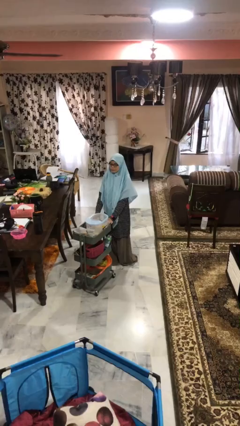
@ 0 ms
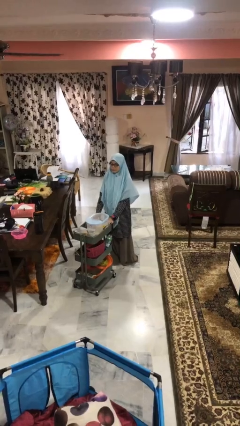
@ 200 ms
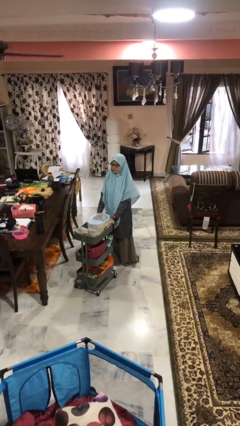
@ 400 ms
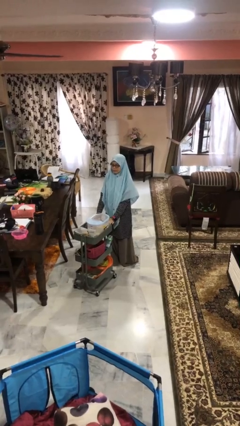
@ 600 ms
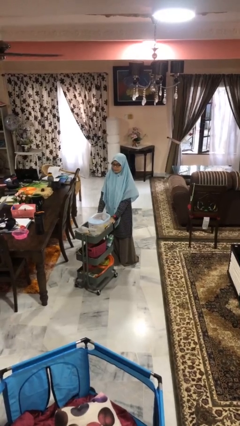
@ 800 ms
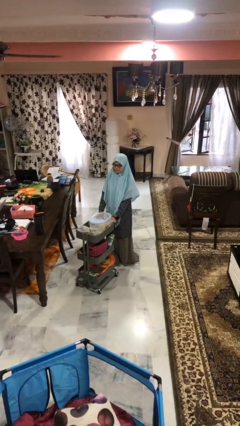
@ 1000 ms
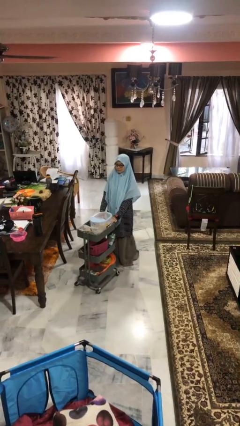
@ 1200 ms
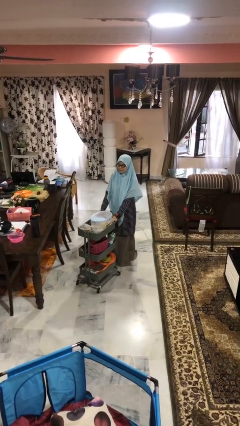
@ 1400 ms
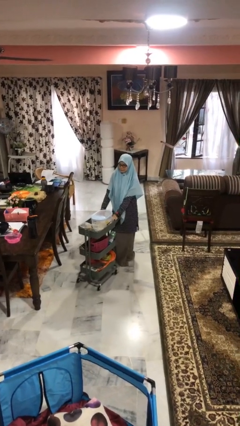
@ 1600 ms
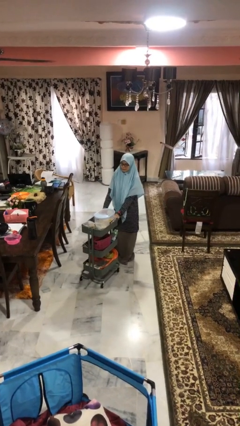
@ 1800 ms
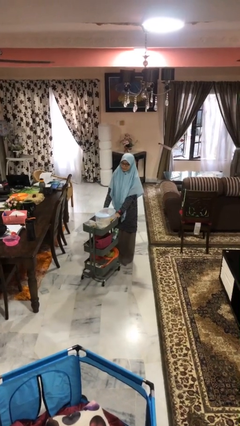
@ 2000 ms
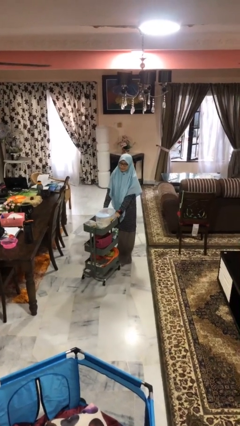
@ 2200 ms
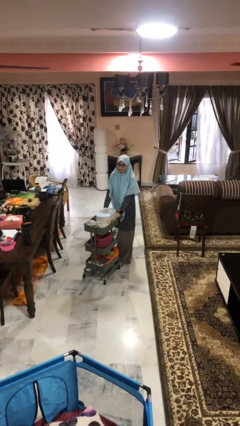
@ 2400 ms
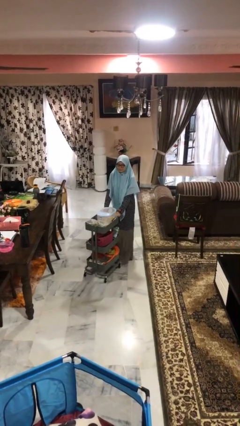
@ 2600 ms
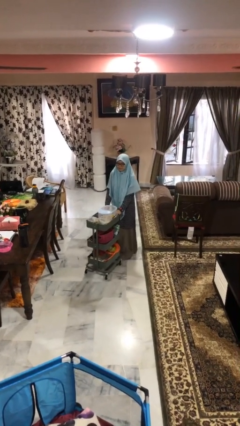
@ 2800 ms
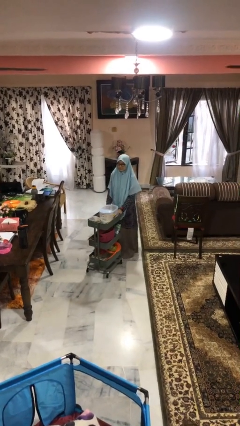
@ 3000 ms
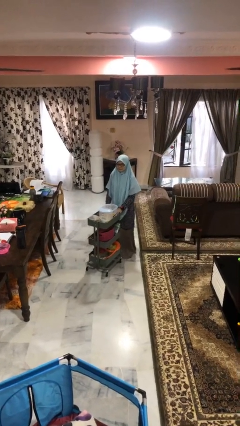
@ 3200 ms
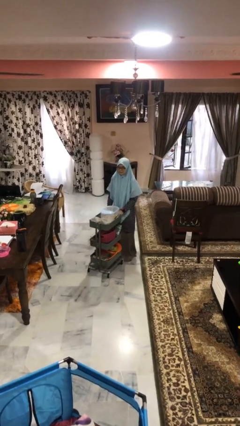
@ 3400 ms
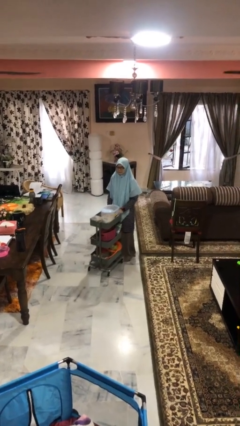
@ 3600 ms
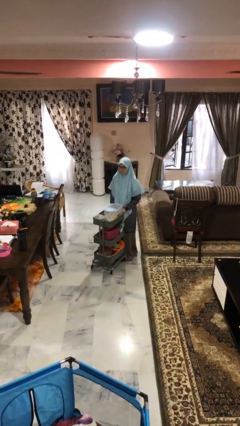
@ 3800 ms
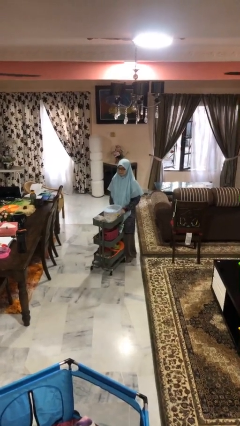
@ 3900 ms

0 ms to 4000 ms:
person pulls wheeled cart

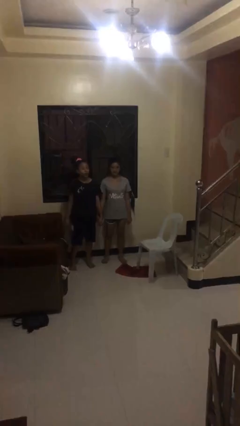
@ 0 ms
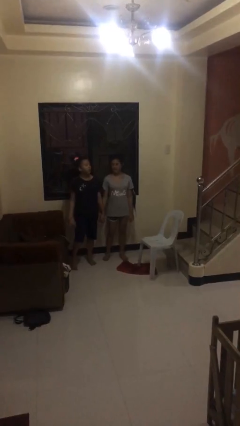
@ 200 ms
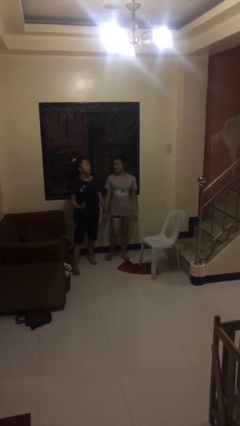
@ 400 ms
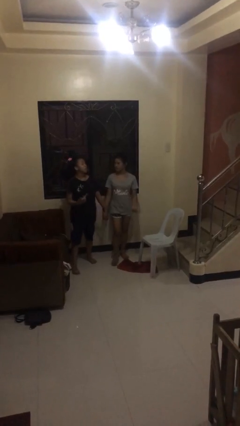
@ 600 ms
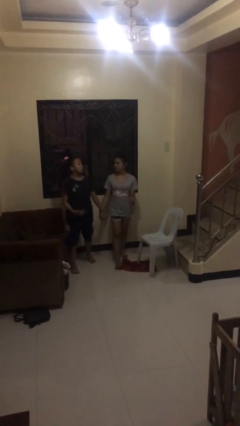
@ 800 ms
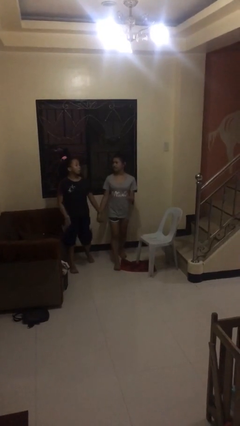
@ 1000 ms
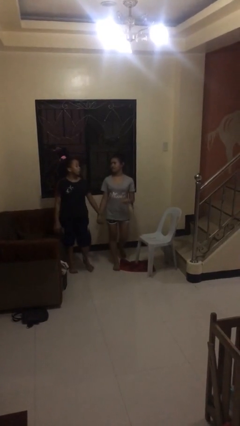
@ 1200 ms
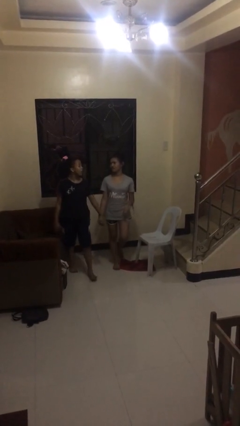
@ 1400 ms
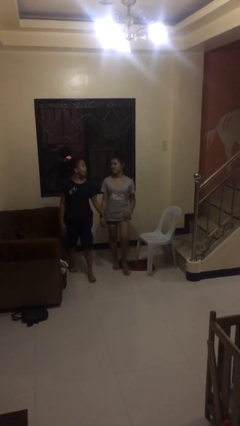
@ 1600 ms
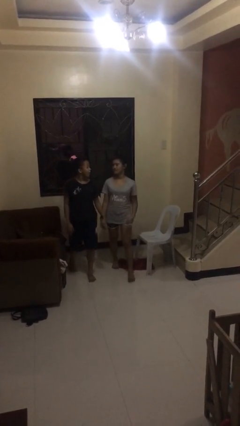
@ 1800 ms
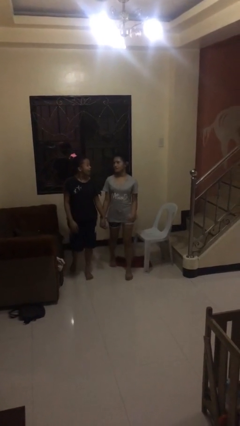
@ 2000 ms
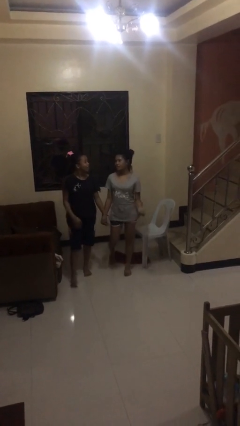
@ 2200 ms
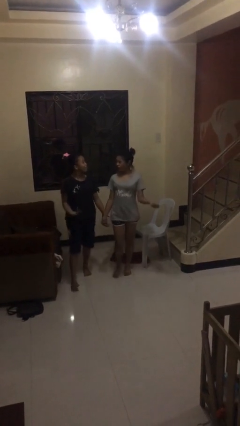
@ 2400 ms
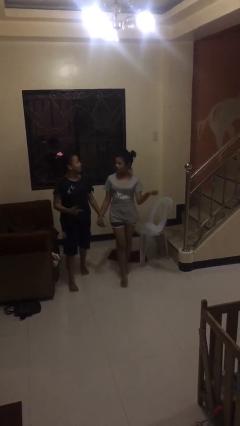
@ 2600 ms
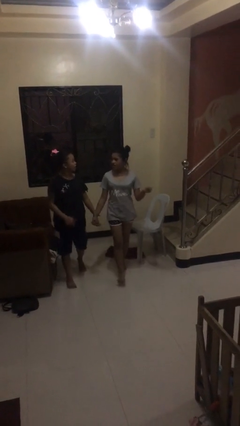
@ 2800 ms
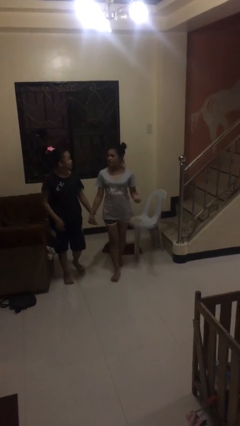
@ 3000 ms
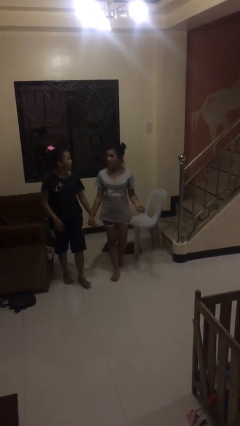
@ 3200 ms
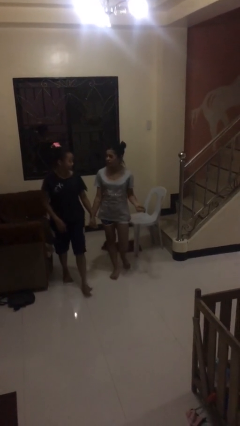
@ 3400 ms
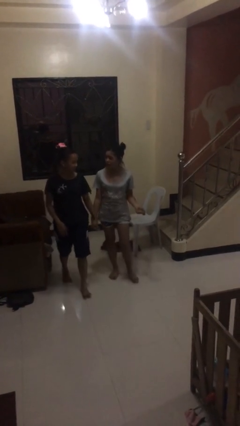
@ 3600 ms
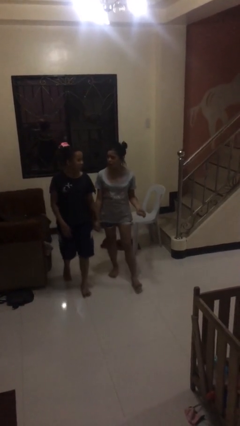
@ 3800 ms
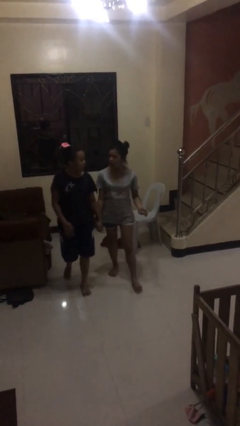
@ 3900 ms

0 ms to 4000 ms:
person holds hand

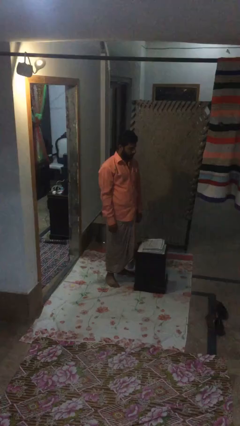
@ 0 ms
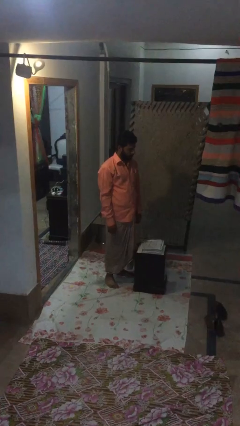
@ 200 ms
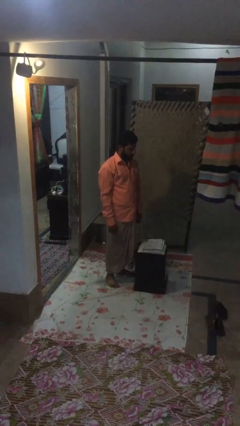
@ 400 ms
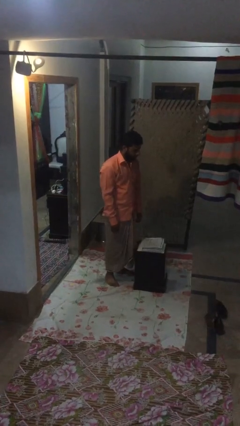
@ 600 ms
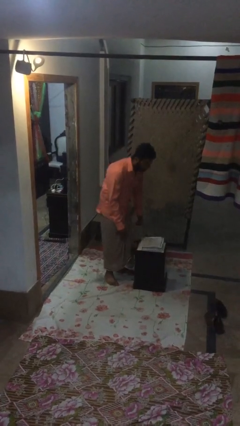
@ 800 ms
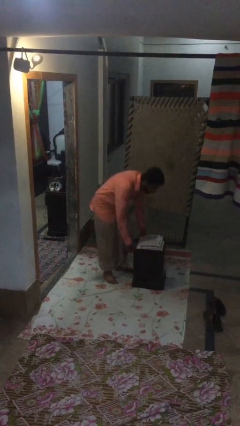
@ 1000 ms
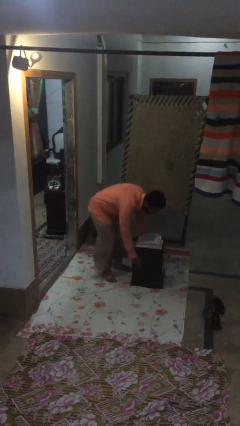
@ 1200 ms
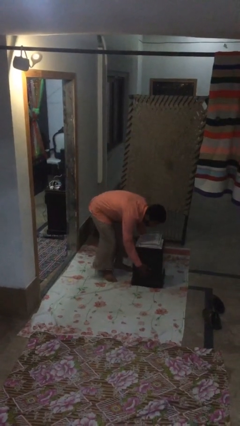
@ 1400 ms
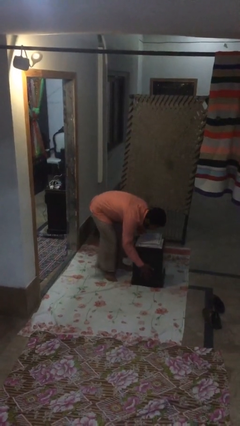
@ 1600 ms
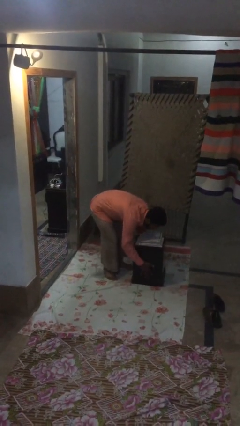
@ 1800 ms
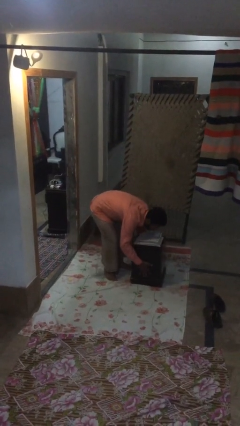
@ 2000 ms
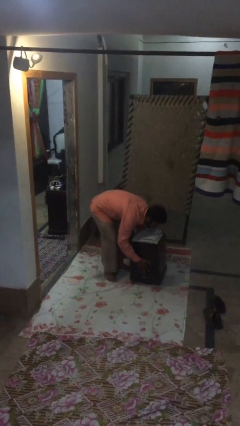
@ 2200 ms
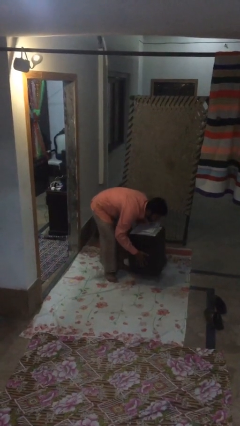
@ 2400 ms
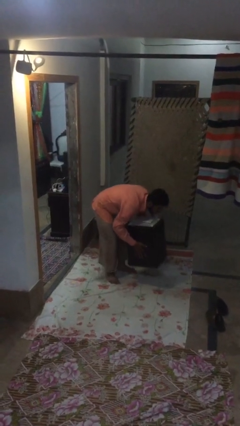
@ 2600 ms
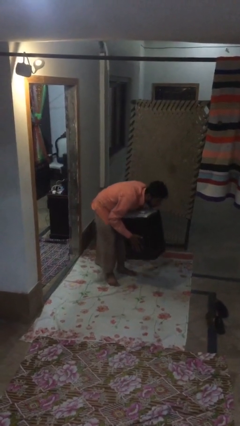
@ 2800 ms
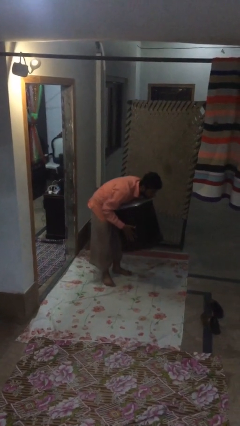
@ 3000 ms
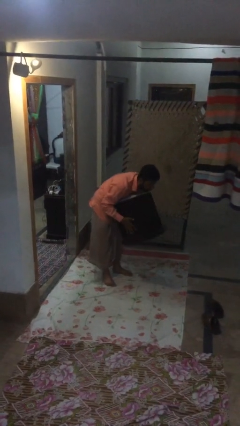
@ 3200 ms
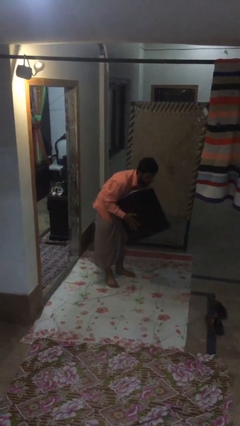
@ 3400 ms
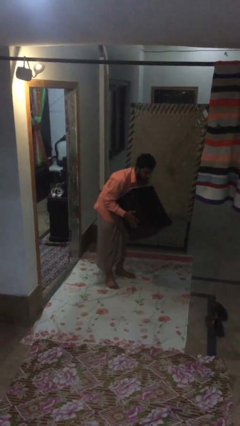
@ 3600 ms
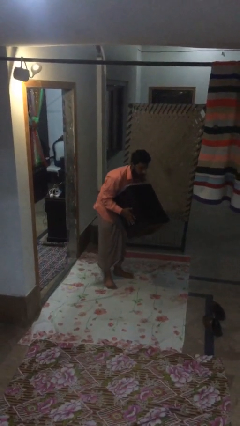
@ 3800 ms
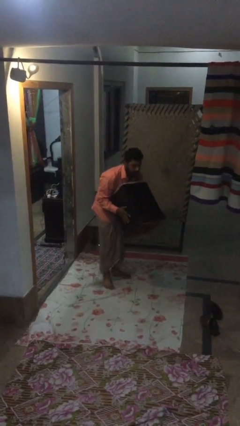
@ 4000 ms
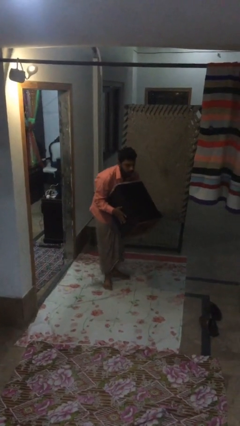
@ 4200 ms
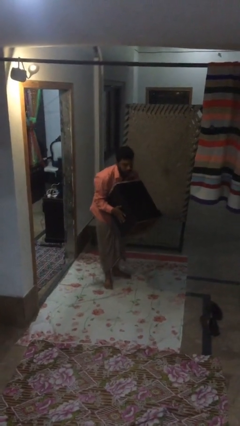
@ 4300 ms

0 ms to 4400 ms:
person picks up object from floor

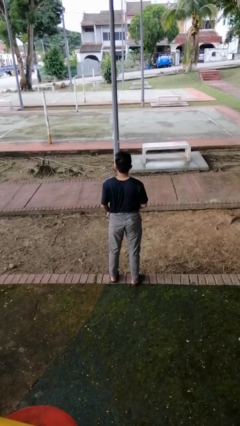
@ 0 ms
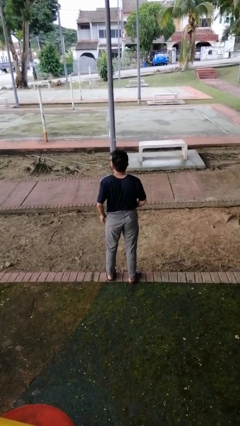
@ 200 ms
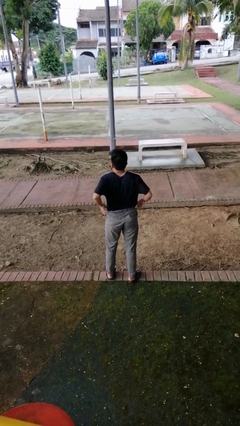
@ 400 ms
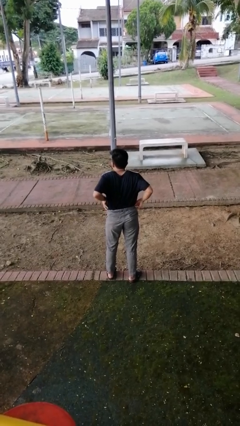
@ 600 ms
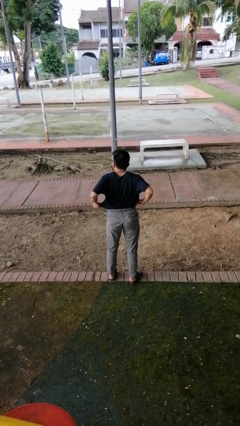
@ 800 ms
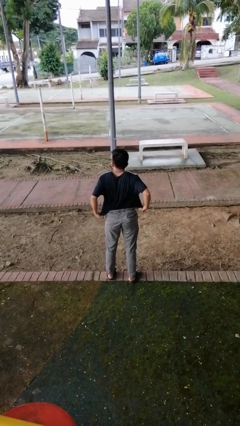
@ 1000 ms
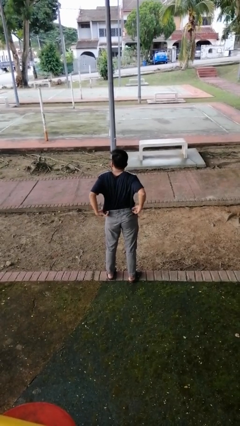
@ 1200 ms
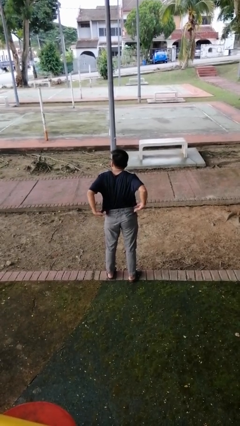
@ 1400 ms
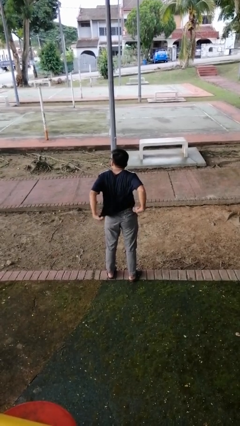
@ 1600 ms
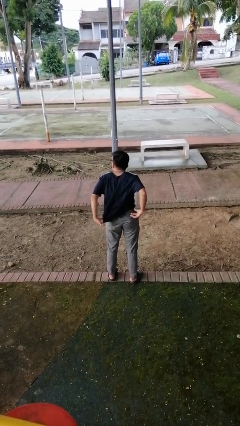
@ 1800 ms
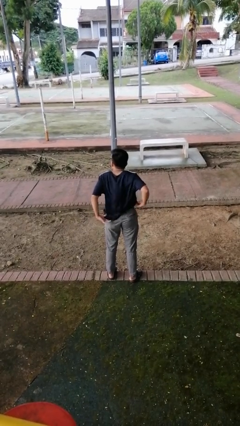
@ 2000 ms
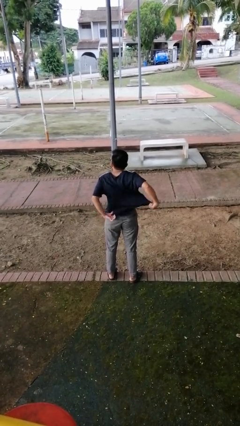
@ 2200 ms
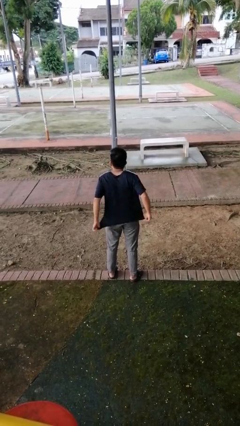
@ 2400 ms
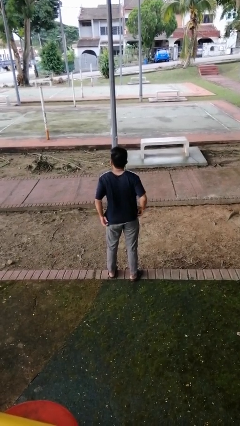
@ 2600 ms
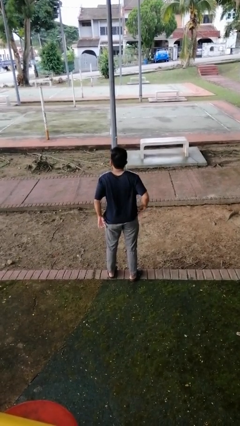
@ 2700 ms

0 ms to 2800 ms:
person untucks shirt

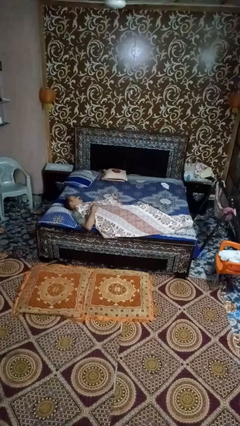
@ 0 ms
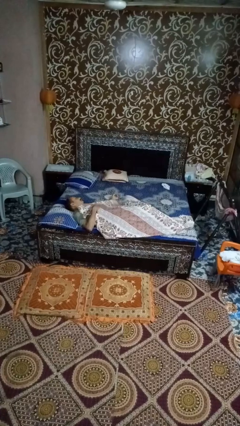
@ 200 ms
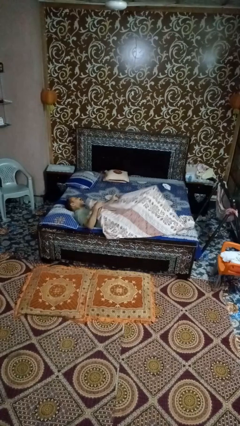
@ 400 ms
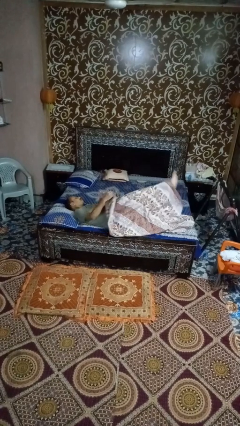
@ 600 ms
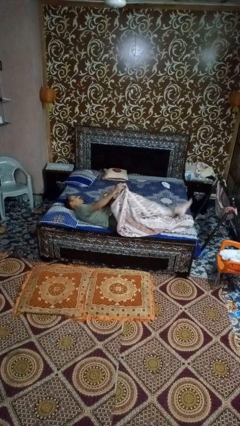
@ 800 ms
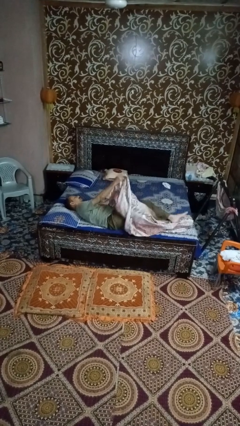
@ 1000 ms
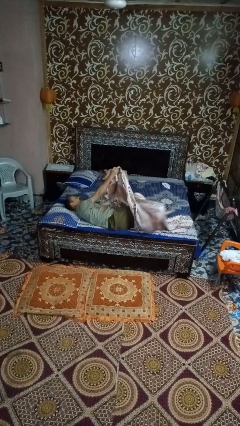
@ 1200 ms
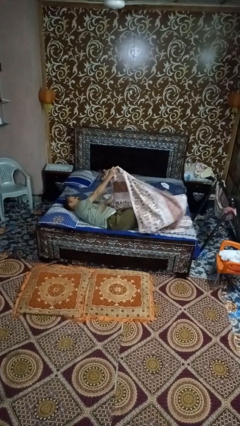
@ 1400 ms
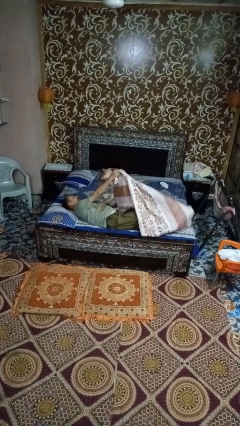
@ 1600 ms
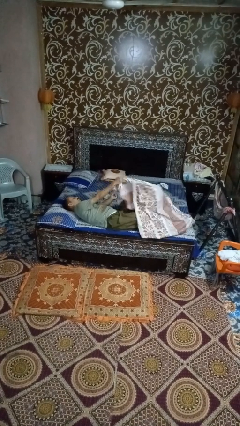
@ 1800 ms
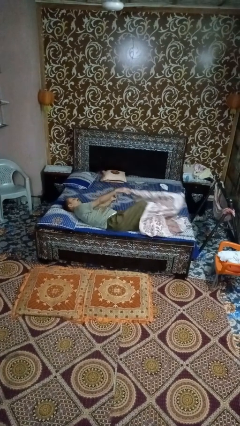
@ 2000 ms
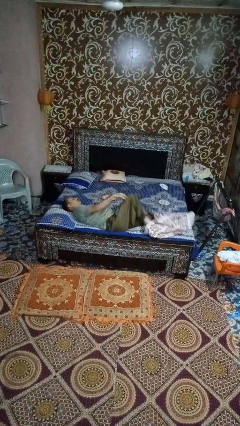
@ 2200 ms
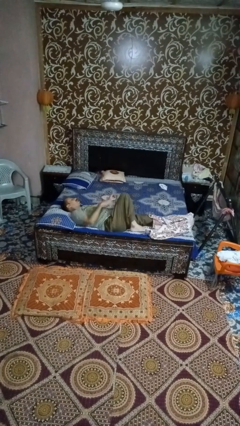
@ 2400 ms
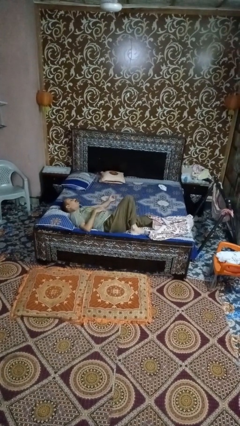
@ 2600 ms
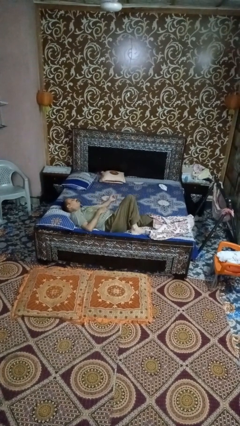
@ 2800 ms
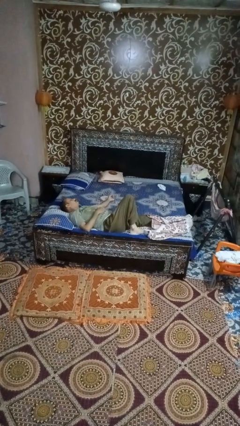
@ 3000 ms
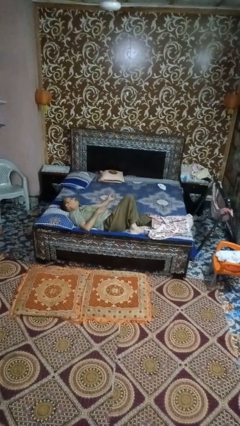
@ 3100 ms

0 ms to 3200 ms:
person uncovers with bedsheets
